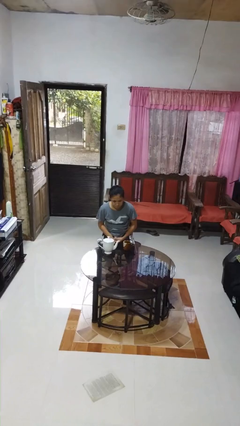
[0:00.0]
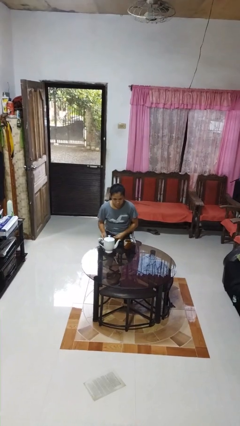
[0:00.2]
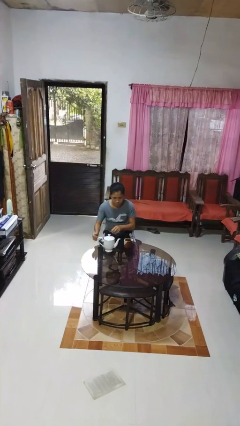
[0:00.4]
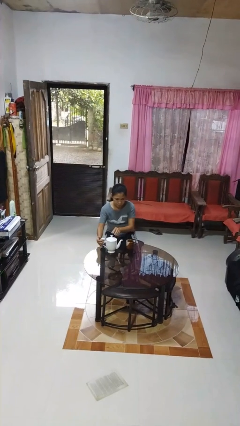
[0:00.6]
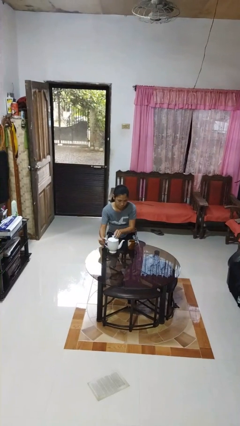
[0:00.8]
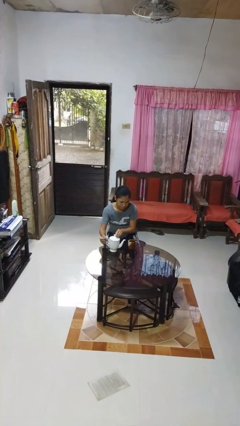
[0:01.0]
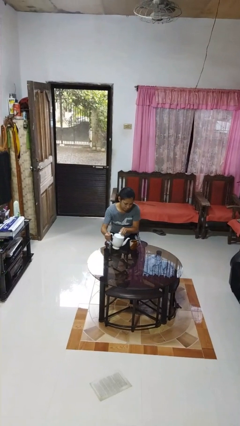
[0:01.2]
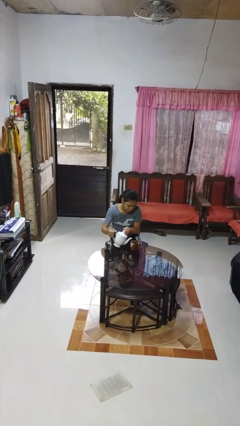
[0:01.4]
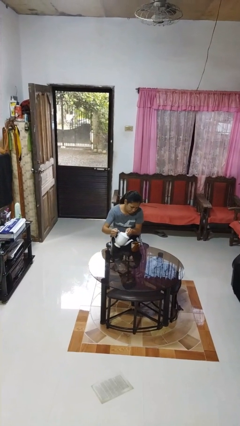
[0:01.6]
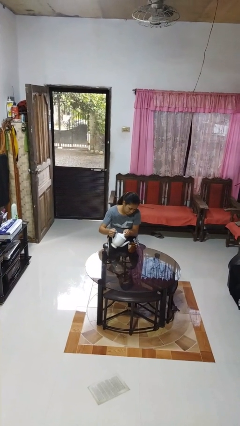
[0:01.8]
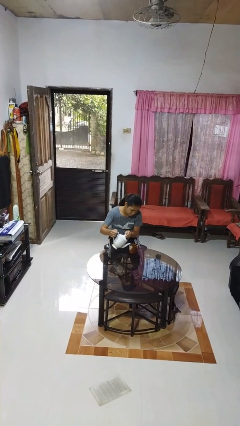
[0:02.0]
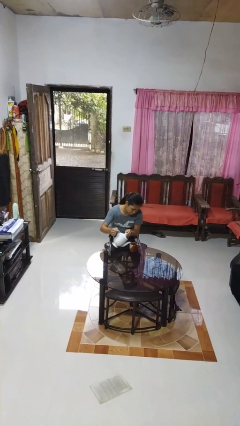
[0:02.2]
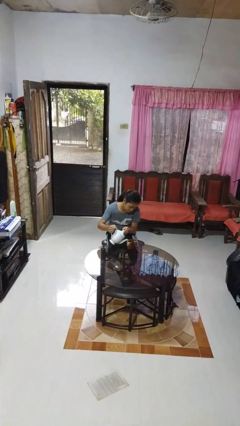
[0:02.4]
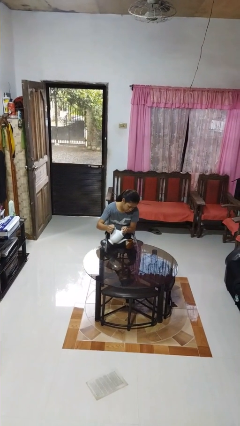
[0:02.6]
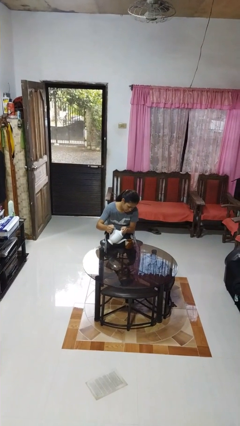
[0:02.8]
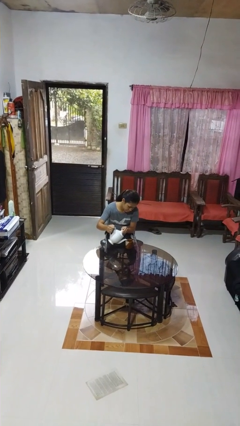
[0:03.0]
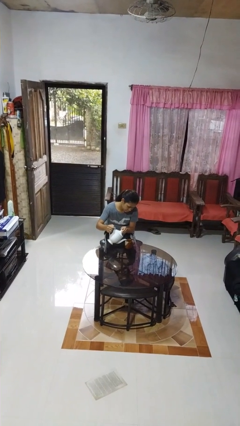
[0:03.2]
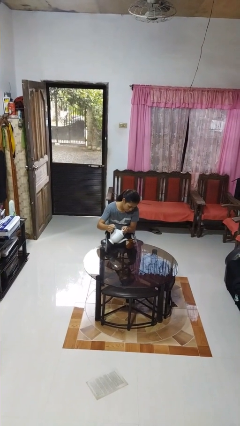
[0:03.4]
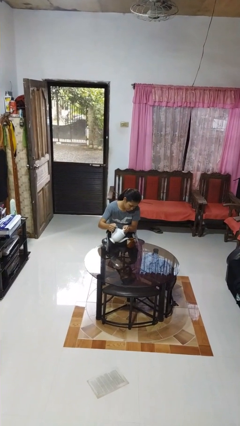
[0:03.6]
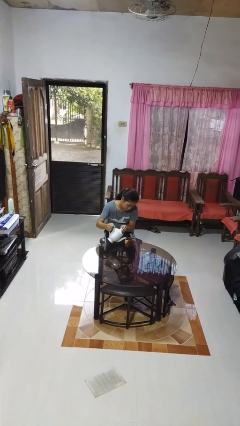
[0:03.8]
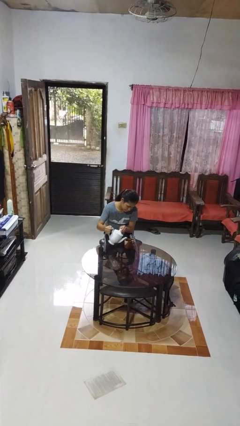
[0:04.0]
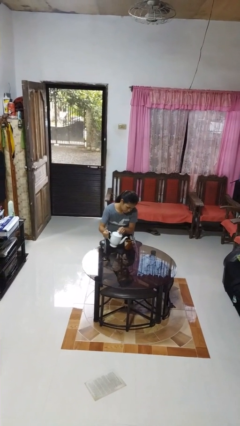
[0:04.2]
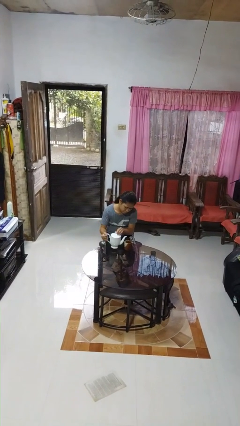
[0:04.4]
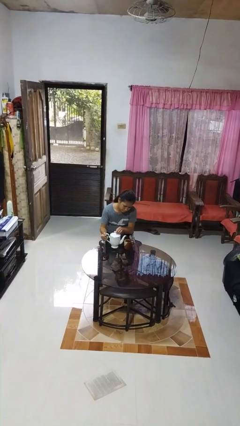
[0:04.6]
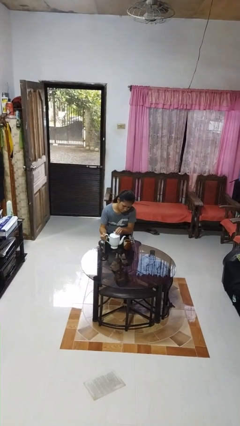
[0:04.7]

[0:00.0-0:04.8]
person pours coffee into mug

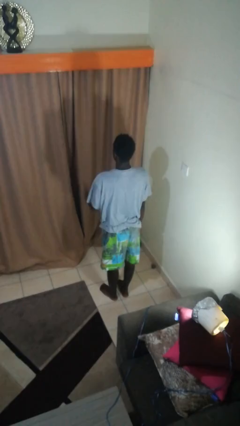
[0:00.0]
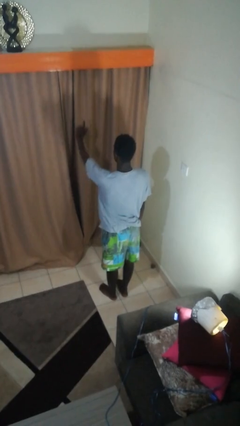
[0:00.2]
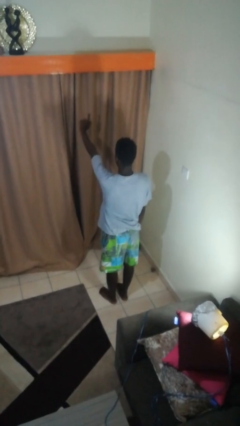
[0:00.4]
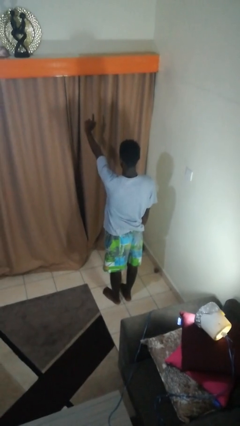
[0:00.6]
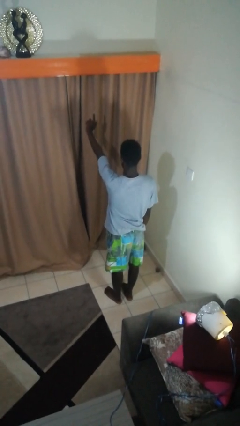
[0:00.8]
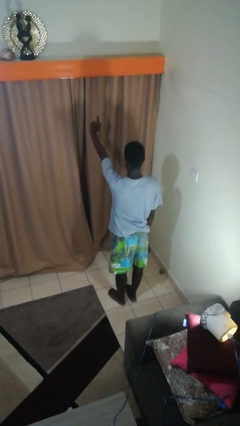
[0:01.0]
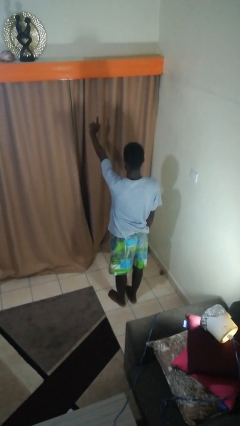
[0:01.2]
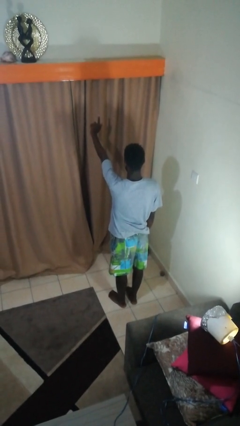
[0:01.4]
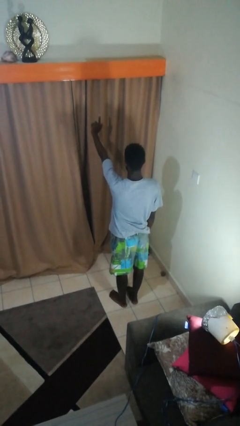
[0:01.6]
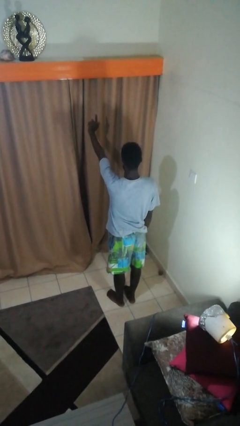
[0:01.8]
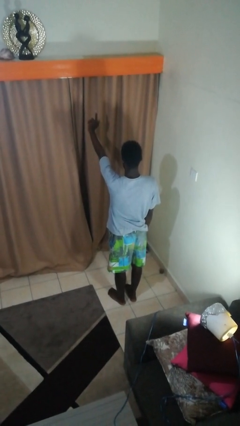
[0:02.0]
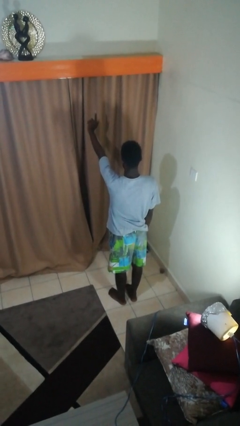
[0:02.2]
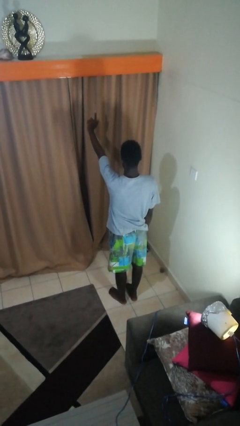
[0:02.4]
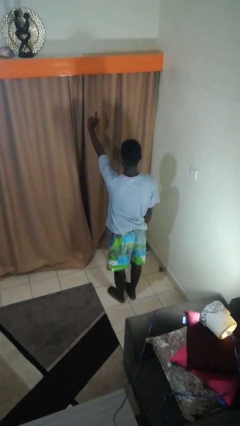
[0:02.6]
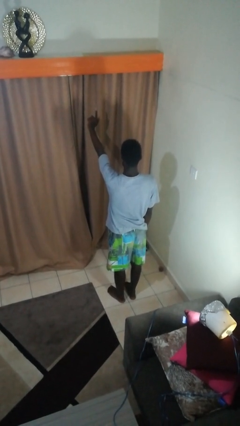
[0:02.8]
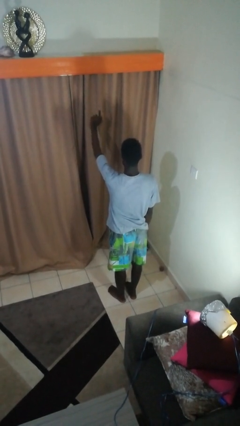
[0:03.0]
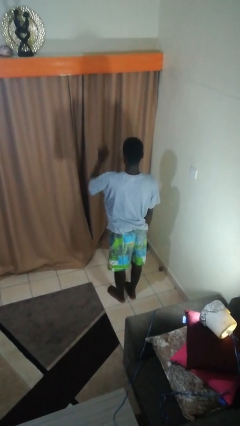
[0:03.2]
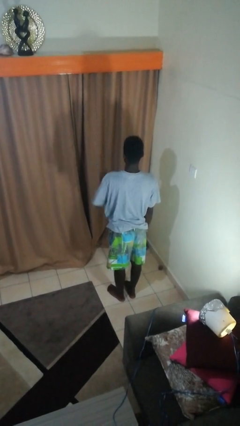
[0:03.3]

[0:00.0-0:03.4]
person gestures number one

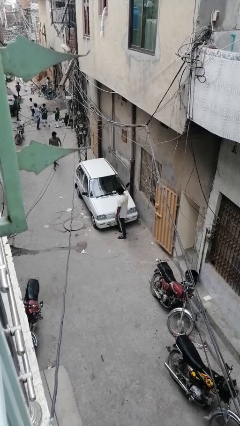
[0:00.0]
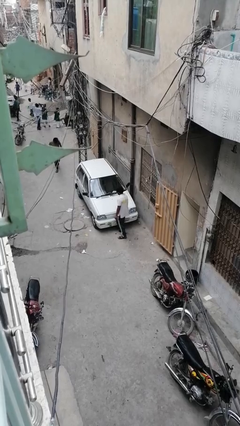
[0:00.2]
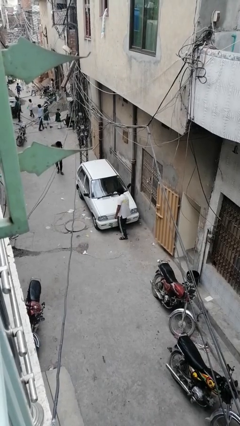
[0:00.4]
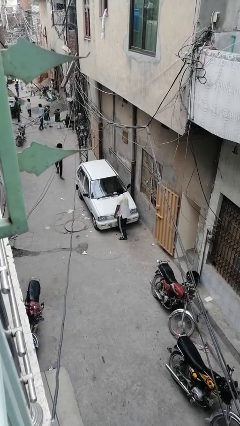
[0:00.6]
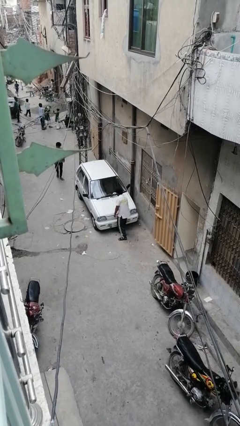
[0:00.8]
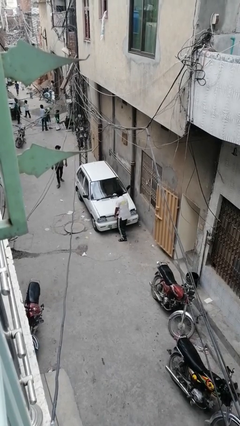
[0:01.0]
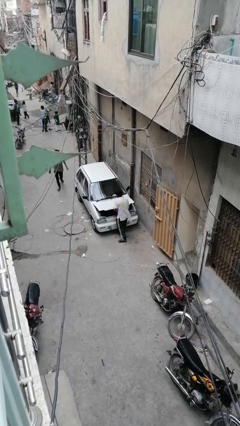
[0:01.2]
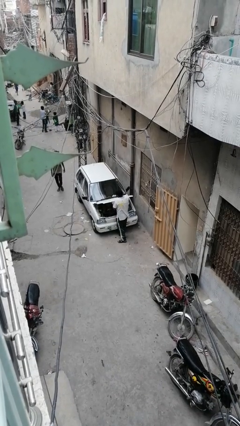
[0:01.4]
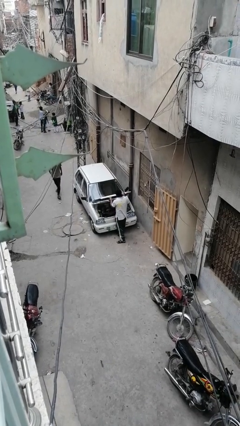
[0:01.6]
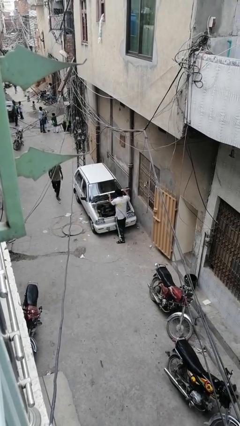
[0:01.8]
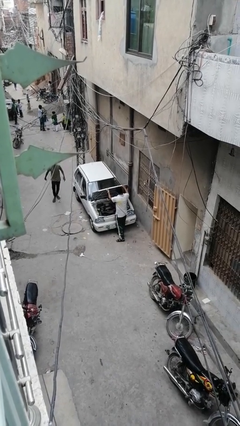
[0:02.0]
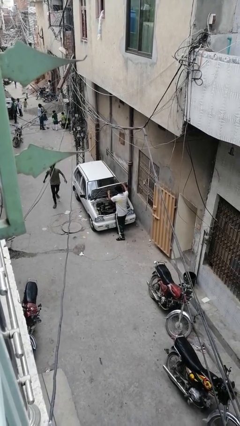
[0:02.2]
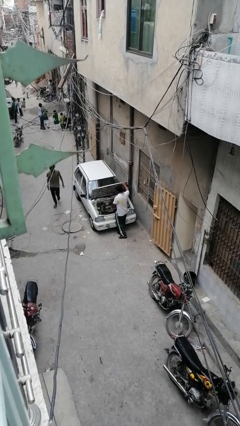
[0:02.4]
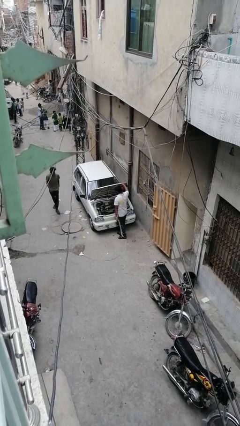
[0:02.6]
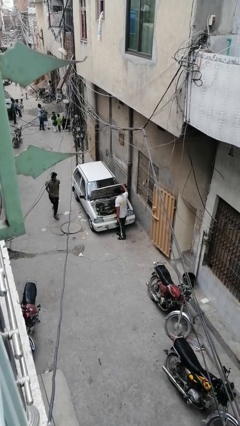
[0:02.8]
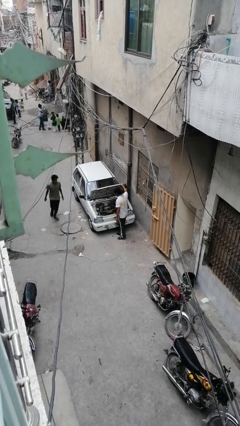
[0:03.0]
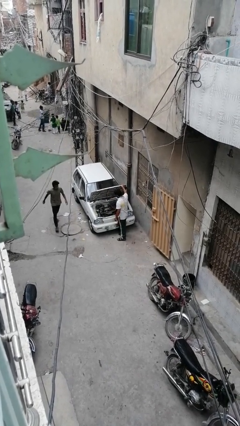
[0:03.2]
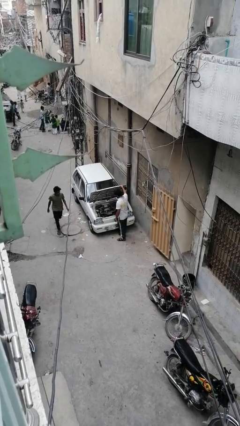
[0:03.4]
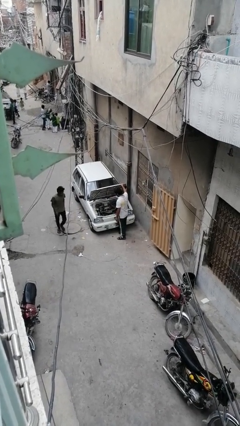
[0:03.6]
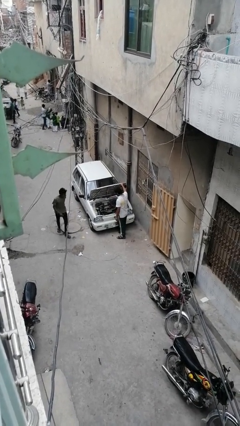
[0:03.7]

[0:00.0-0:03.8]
person opens car hood

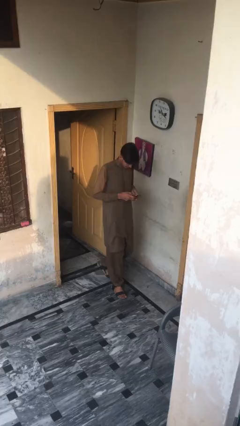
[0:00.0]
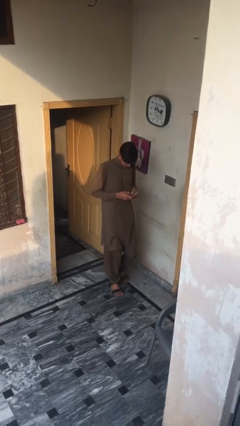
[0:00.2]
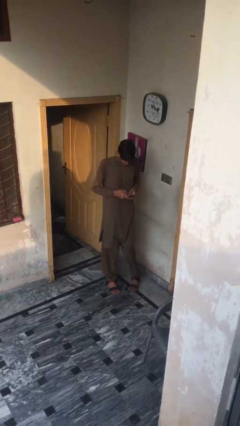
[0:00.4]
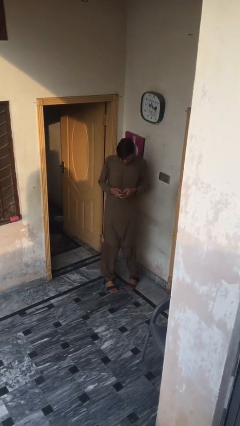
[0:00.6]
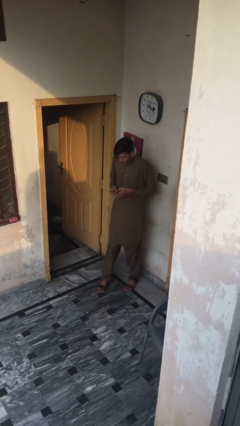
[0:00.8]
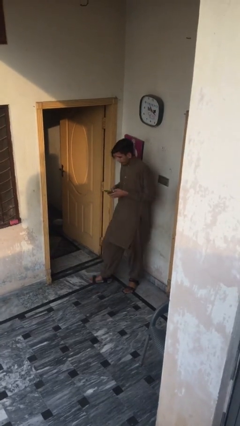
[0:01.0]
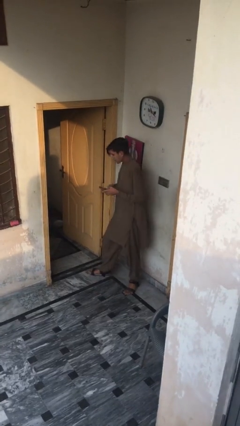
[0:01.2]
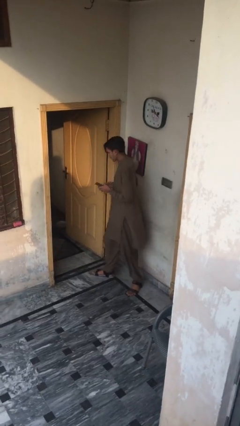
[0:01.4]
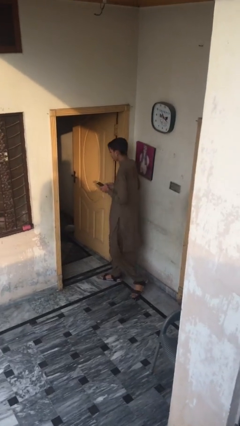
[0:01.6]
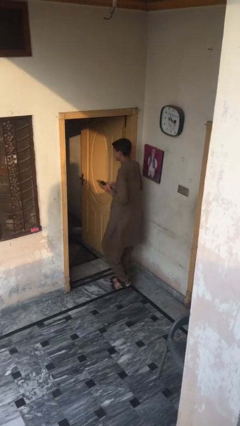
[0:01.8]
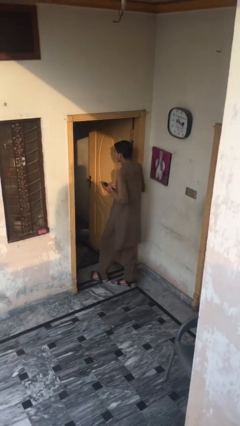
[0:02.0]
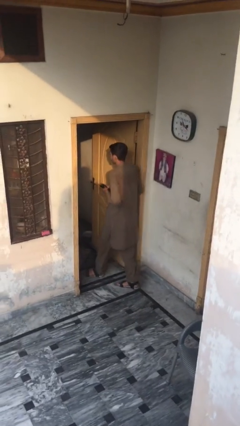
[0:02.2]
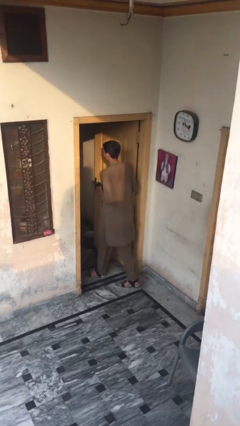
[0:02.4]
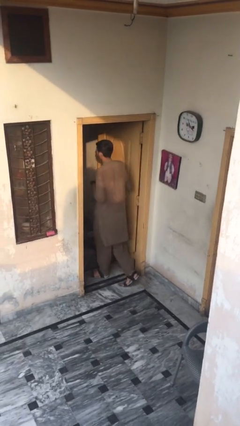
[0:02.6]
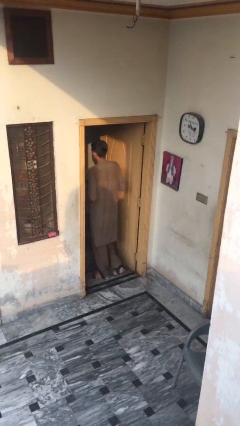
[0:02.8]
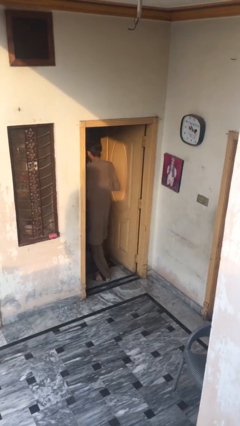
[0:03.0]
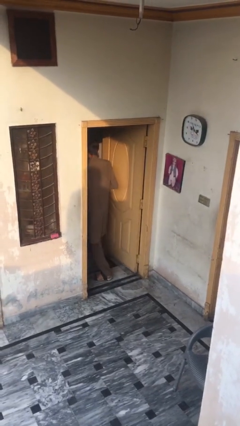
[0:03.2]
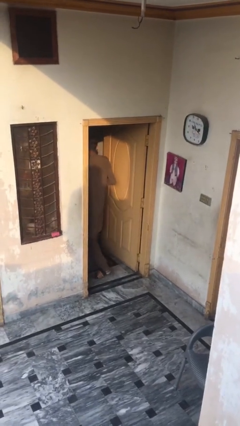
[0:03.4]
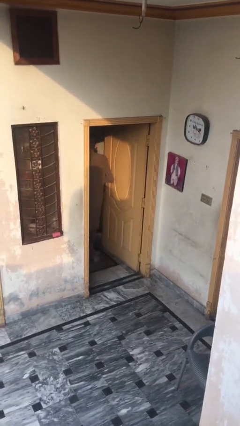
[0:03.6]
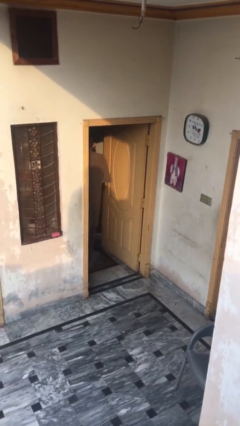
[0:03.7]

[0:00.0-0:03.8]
person exits scene through structure

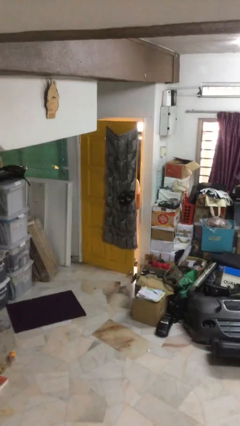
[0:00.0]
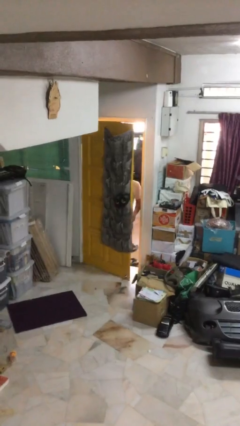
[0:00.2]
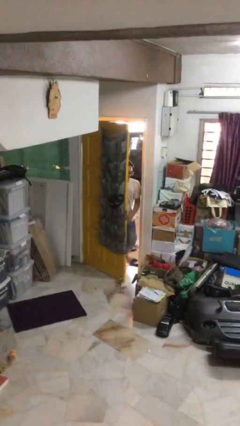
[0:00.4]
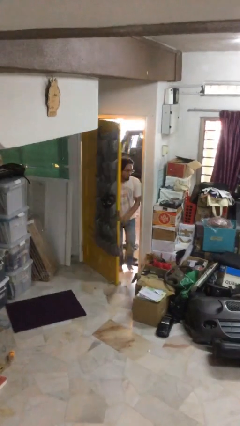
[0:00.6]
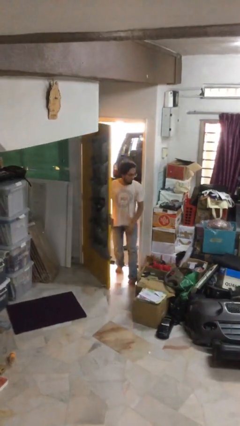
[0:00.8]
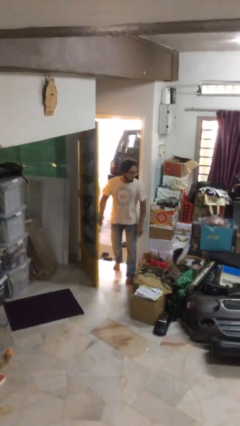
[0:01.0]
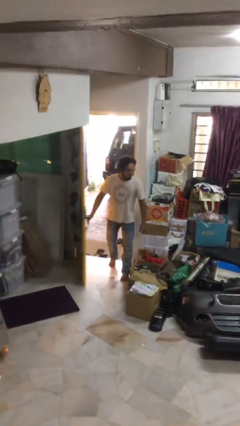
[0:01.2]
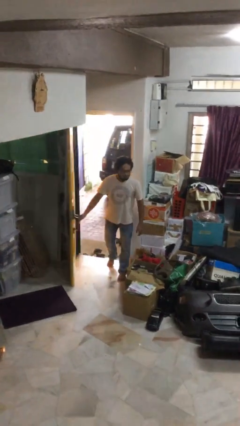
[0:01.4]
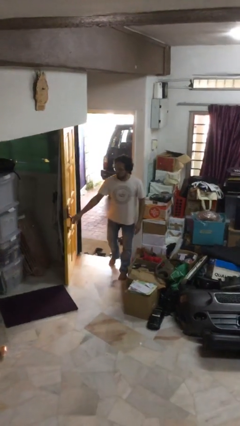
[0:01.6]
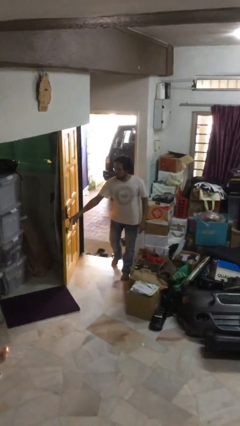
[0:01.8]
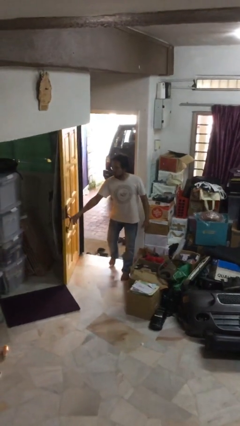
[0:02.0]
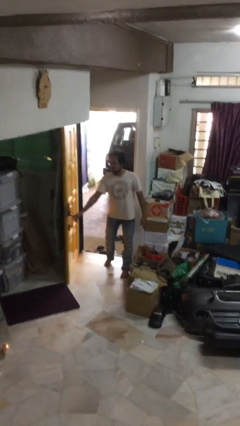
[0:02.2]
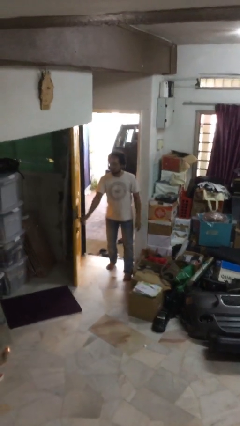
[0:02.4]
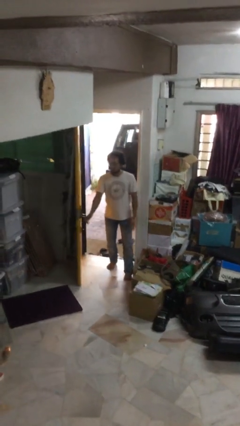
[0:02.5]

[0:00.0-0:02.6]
person opens facility door
